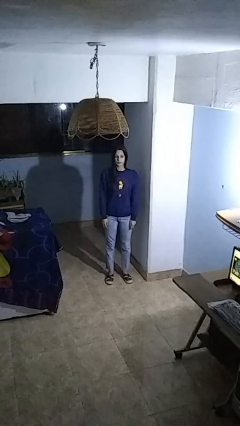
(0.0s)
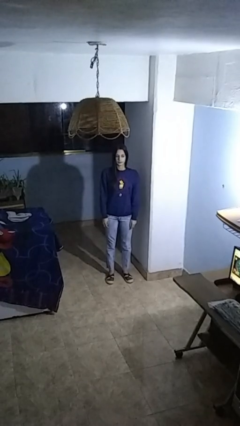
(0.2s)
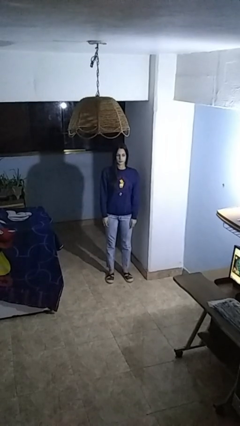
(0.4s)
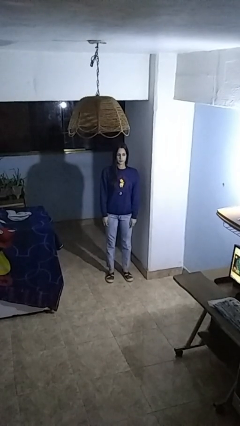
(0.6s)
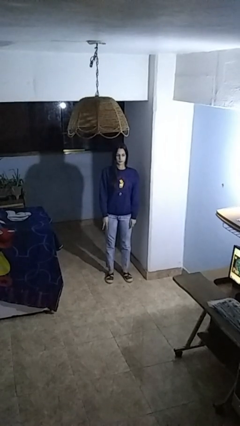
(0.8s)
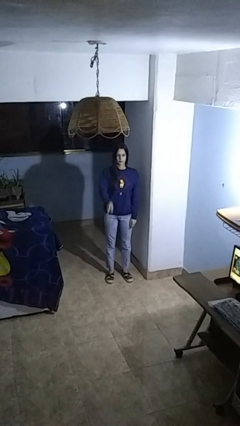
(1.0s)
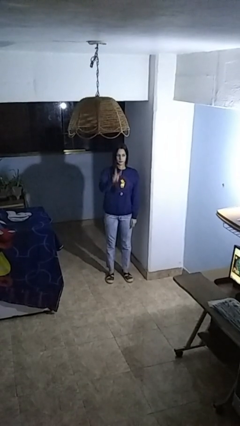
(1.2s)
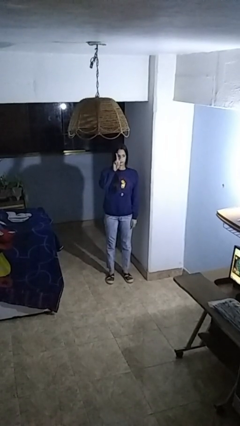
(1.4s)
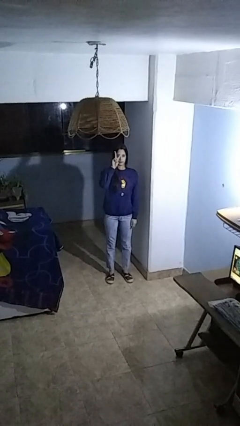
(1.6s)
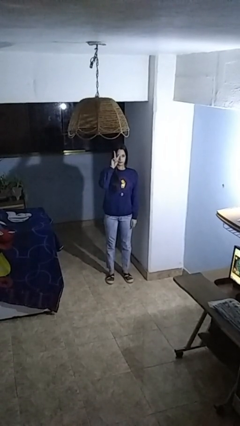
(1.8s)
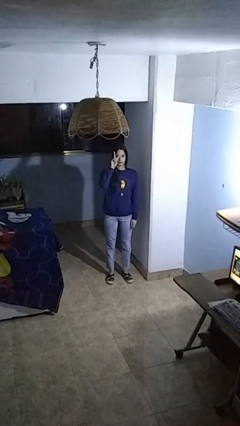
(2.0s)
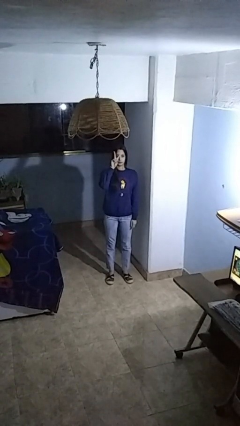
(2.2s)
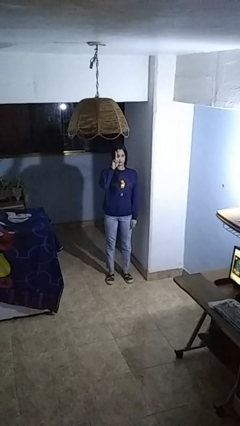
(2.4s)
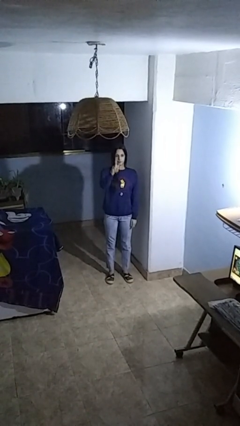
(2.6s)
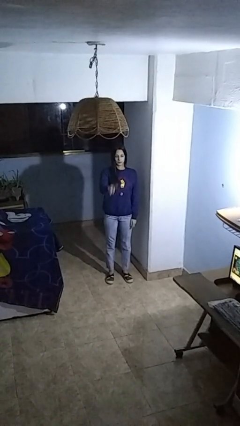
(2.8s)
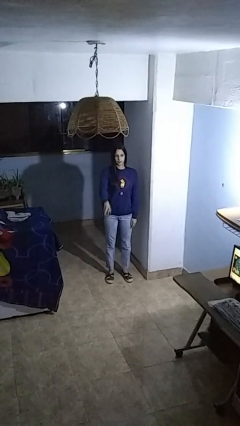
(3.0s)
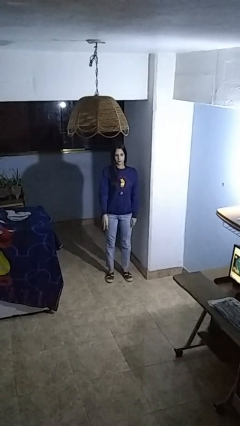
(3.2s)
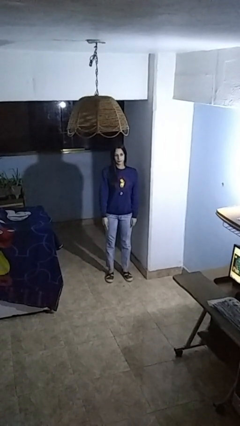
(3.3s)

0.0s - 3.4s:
person gestures peace

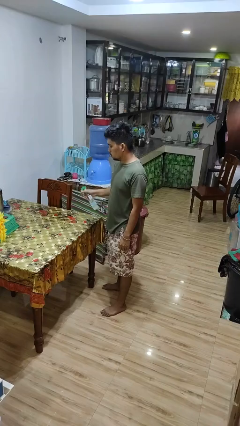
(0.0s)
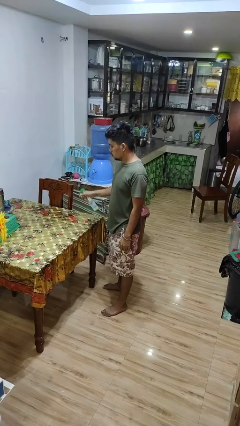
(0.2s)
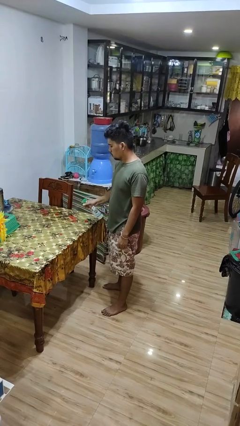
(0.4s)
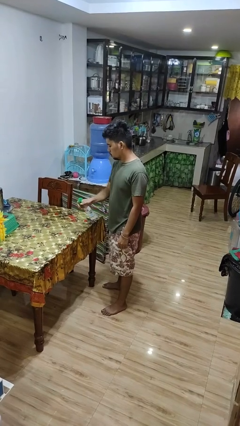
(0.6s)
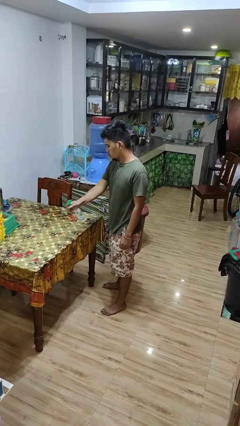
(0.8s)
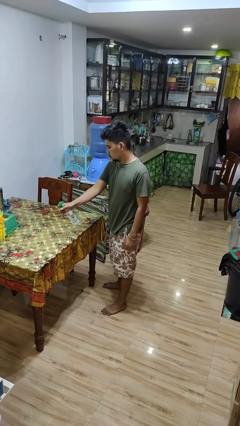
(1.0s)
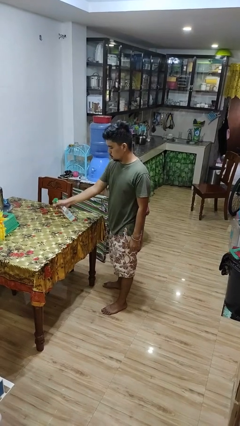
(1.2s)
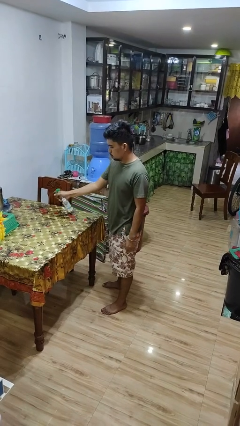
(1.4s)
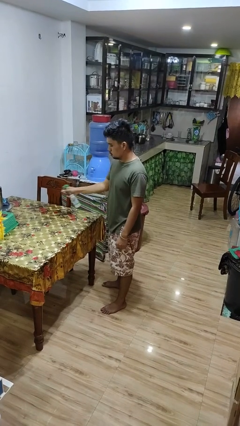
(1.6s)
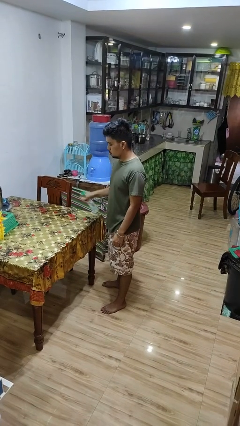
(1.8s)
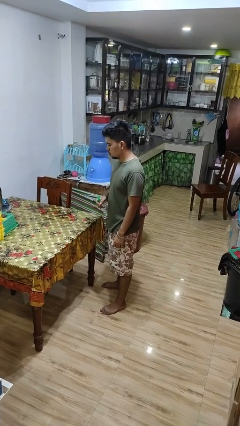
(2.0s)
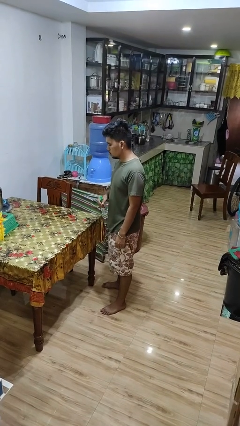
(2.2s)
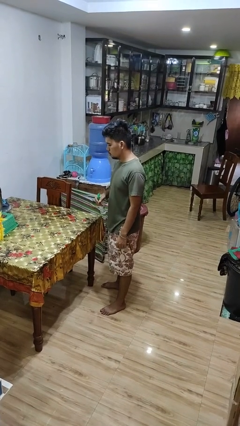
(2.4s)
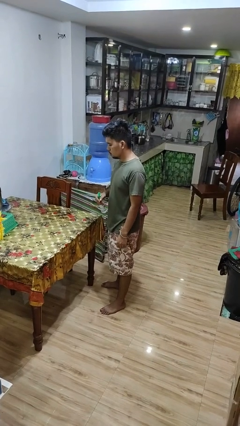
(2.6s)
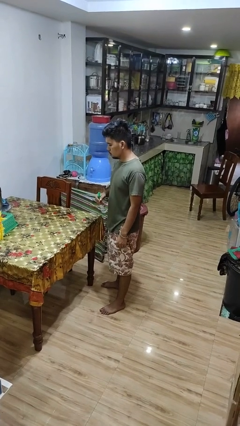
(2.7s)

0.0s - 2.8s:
person sprays from bottle

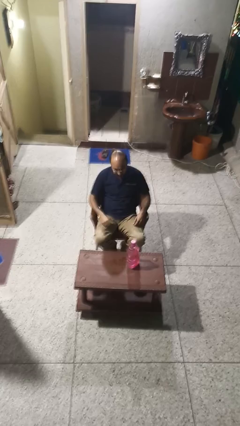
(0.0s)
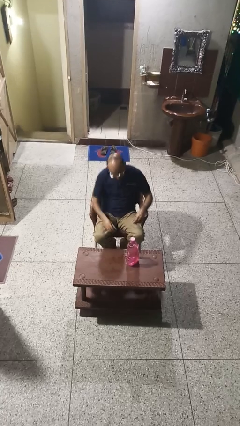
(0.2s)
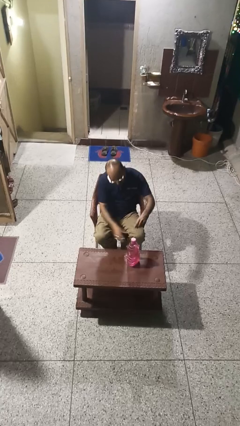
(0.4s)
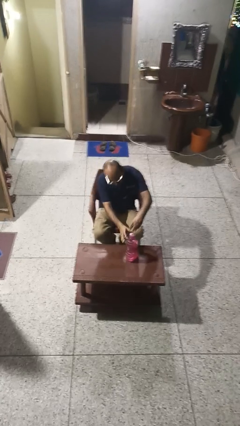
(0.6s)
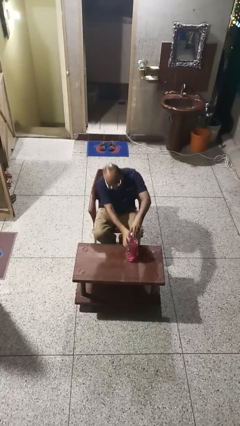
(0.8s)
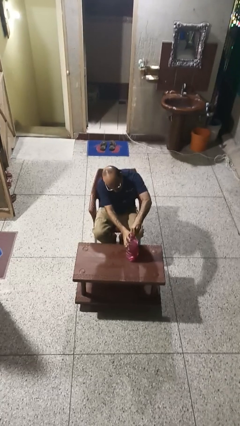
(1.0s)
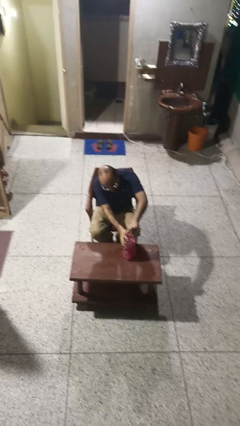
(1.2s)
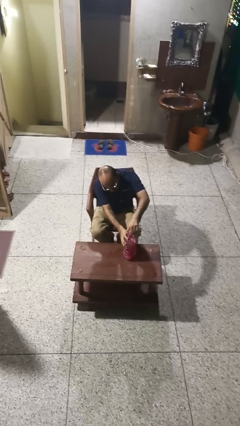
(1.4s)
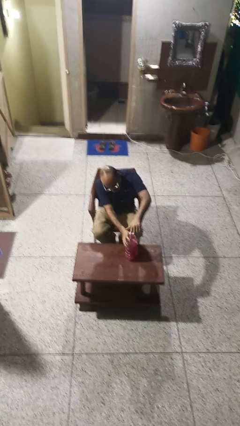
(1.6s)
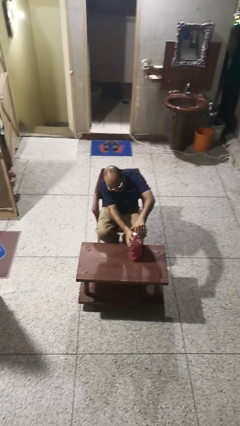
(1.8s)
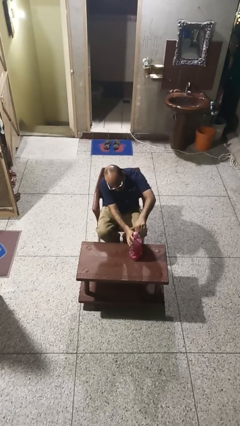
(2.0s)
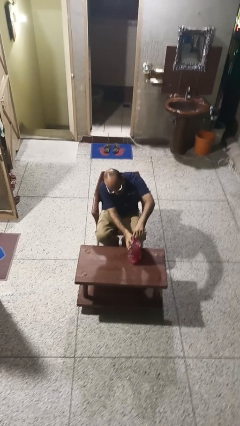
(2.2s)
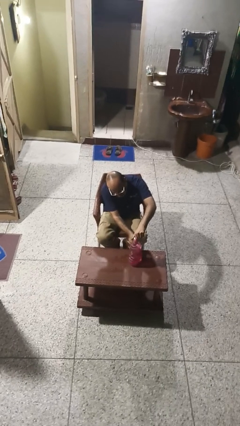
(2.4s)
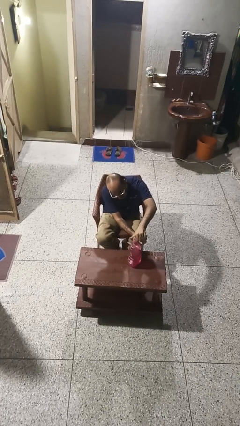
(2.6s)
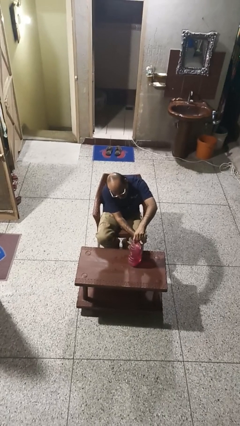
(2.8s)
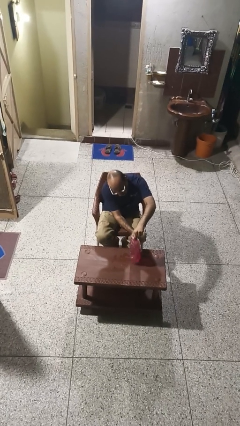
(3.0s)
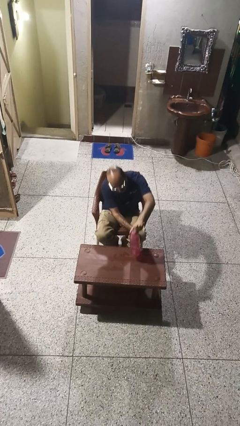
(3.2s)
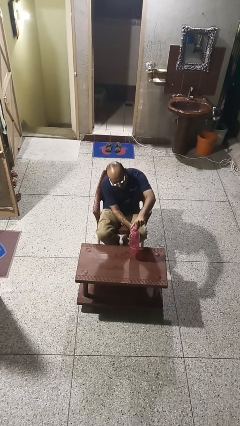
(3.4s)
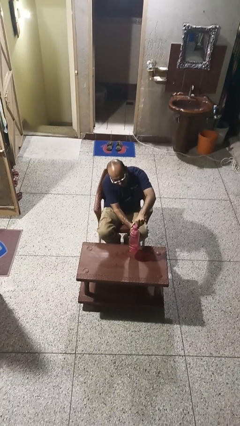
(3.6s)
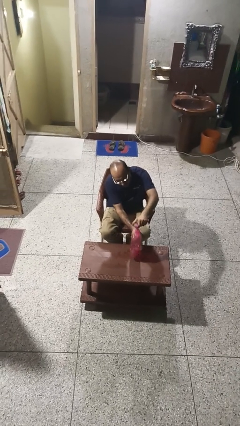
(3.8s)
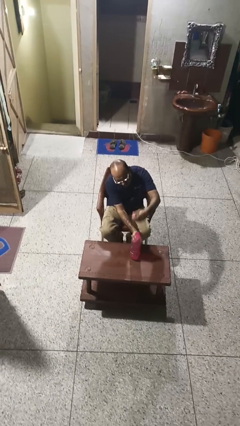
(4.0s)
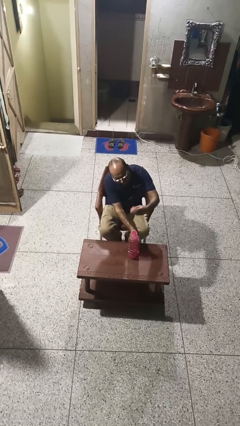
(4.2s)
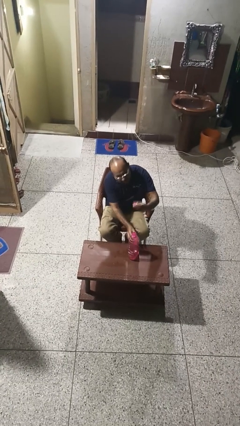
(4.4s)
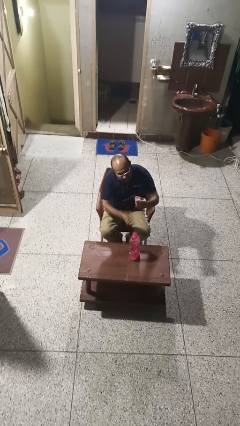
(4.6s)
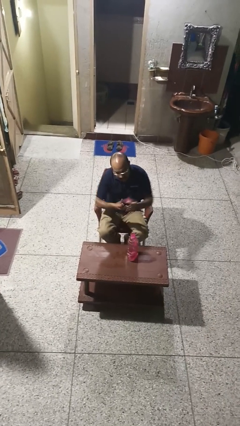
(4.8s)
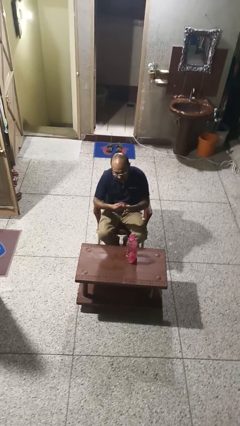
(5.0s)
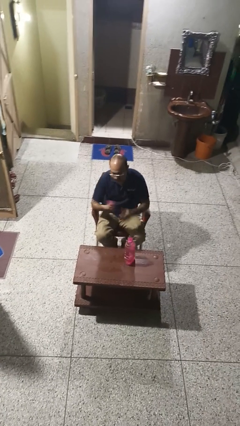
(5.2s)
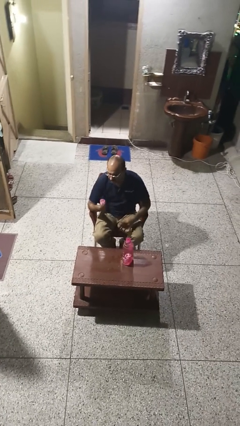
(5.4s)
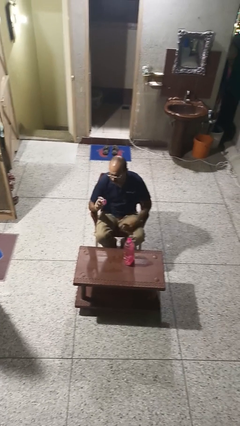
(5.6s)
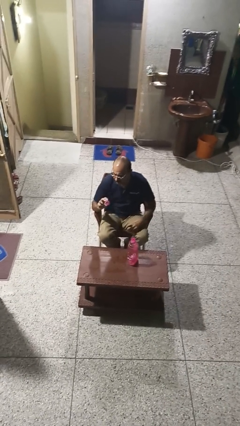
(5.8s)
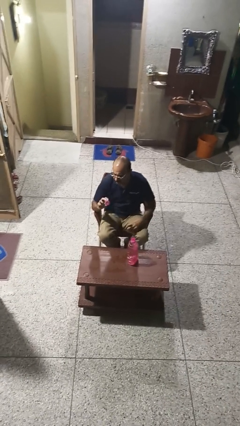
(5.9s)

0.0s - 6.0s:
person unscrews lid from bottle

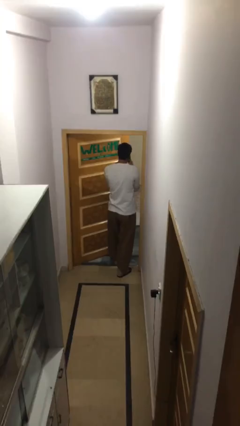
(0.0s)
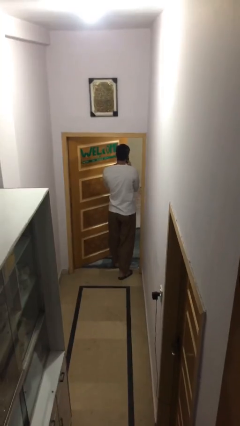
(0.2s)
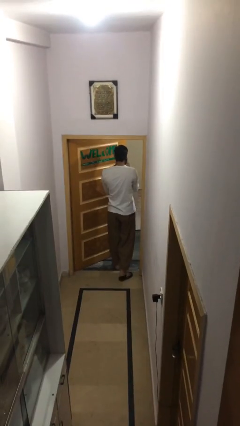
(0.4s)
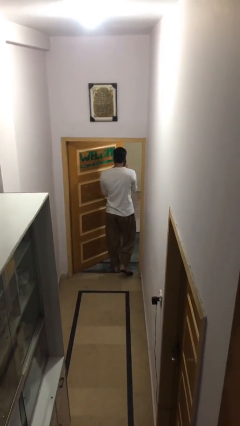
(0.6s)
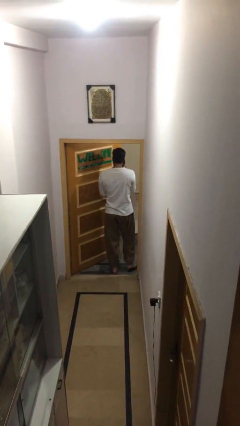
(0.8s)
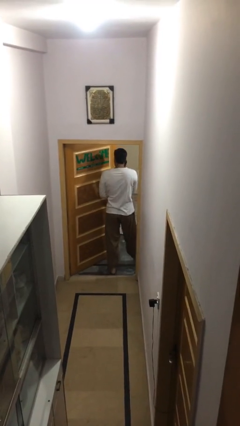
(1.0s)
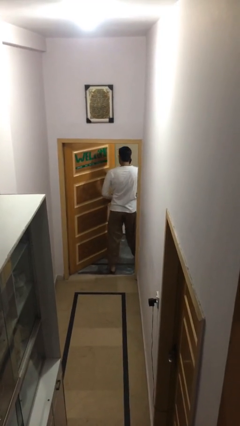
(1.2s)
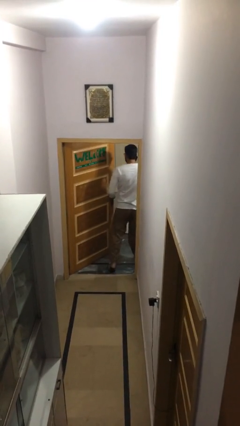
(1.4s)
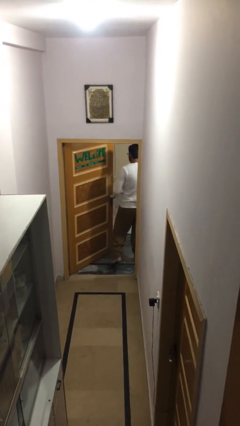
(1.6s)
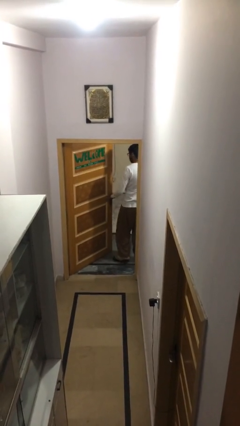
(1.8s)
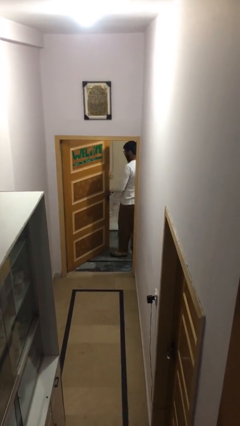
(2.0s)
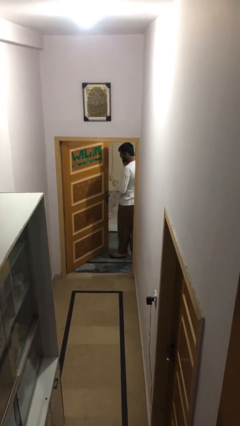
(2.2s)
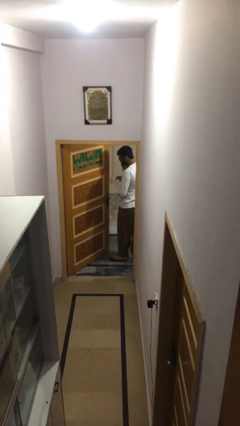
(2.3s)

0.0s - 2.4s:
person exits scene through structure

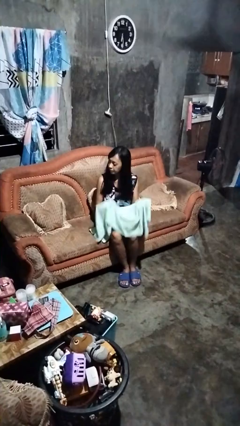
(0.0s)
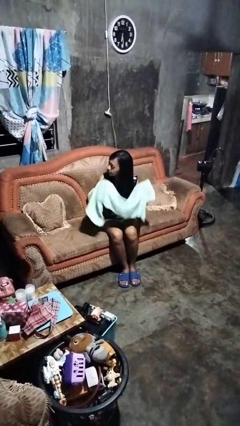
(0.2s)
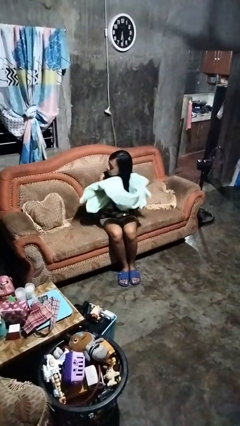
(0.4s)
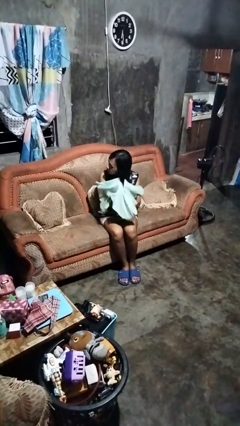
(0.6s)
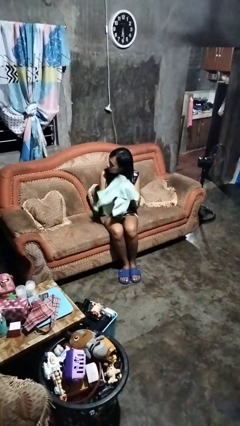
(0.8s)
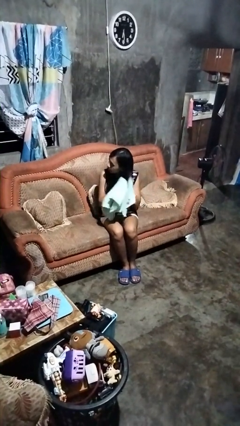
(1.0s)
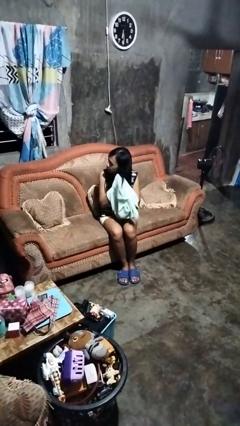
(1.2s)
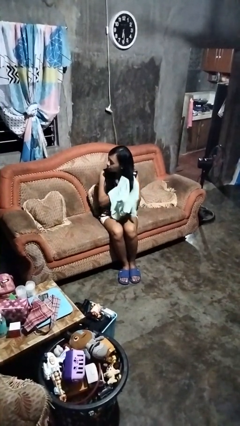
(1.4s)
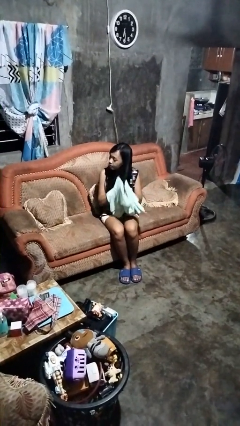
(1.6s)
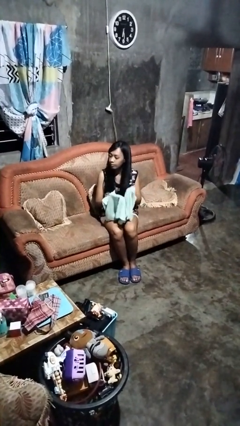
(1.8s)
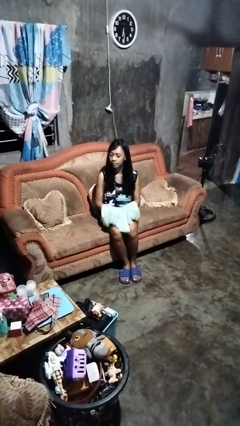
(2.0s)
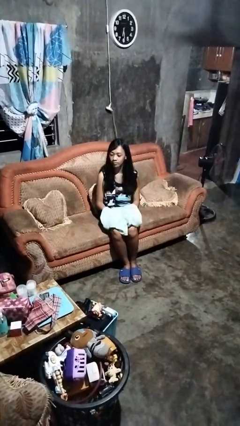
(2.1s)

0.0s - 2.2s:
person dries hair with towel

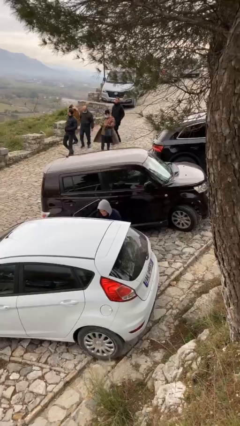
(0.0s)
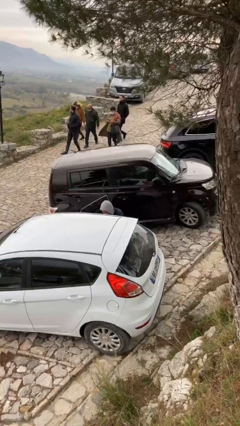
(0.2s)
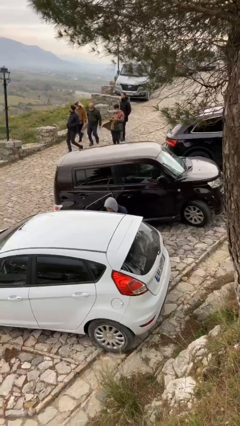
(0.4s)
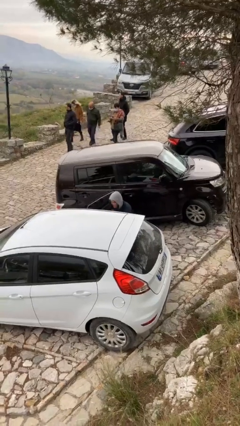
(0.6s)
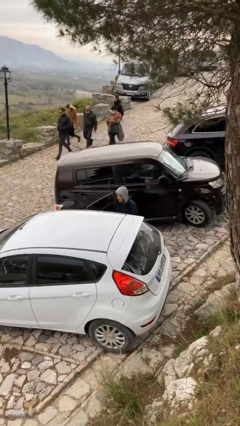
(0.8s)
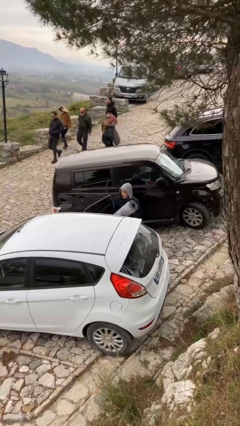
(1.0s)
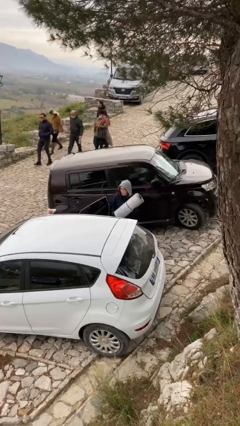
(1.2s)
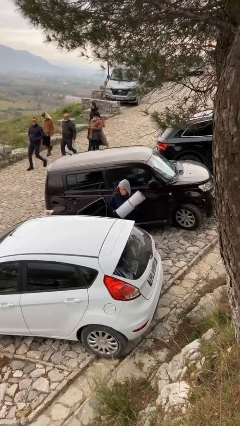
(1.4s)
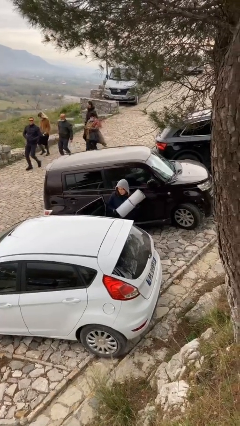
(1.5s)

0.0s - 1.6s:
person unloads car
